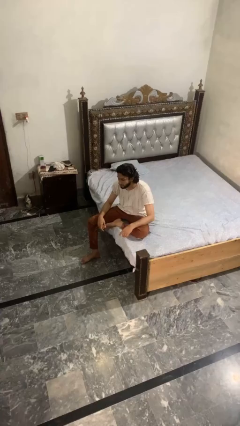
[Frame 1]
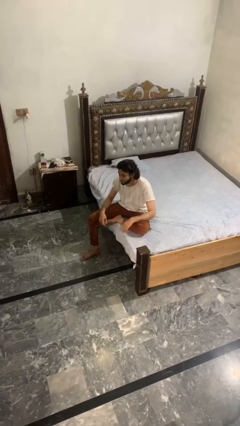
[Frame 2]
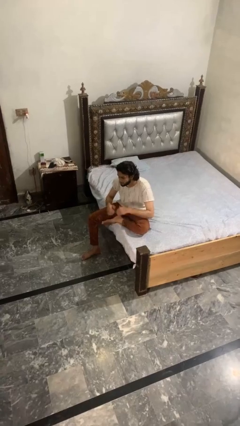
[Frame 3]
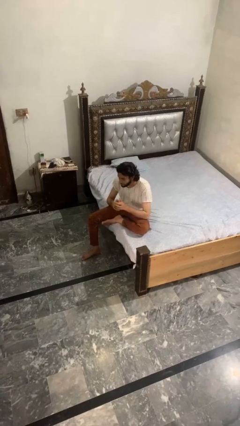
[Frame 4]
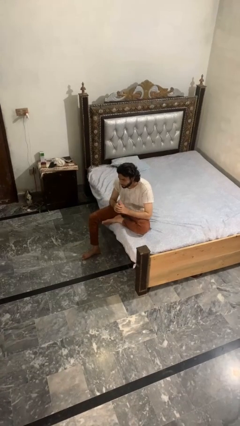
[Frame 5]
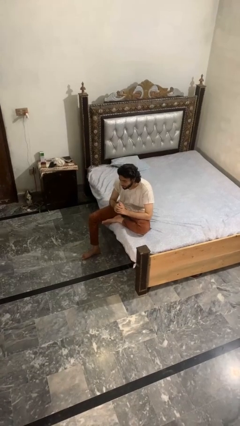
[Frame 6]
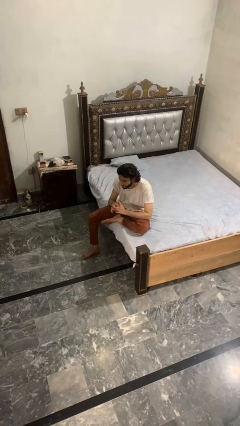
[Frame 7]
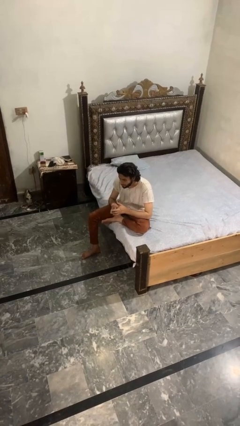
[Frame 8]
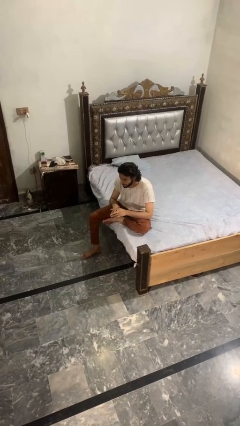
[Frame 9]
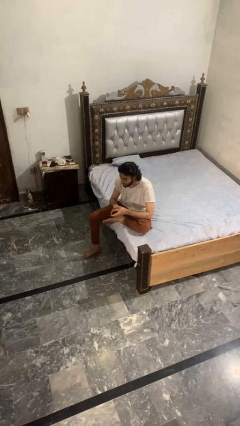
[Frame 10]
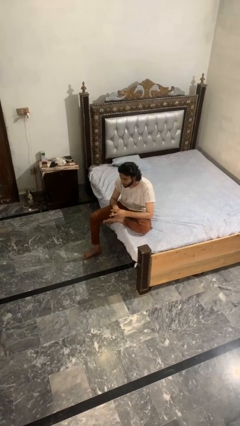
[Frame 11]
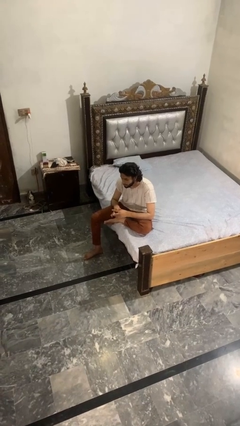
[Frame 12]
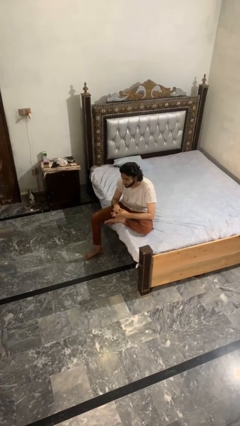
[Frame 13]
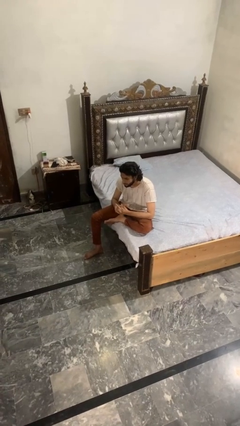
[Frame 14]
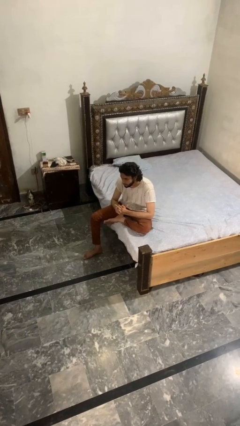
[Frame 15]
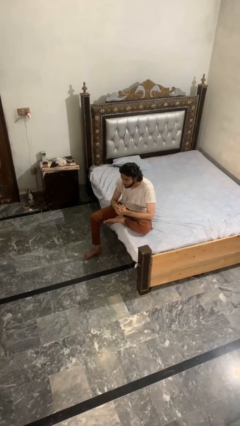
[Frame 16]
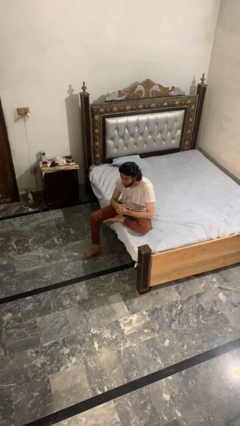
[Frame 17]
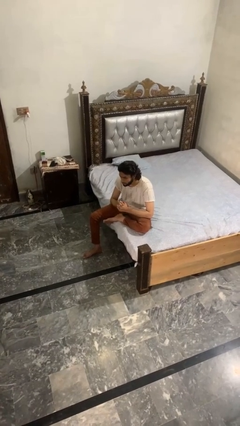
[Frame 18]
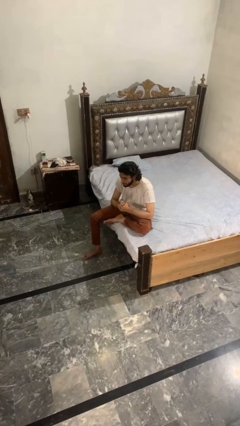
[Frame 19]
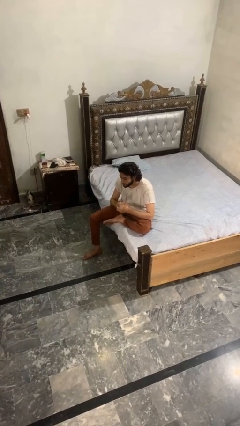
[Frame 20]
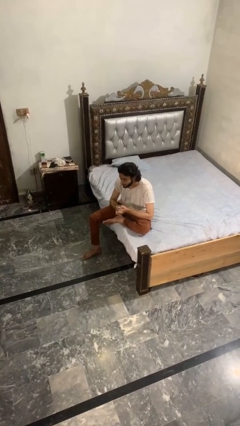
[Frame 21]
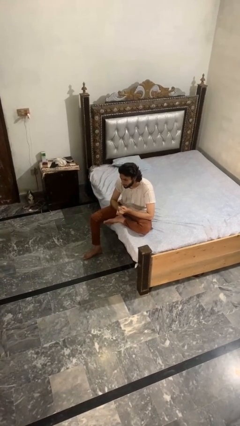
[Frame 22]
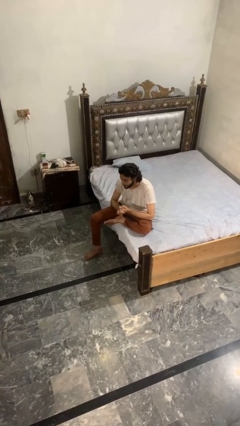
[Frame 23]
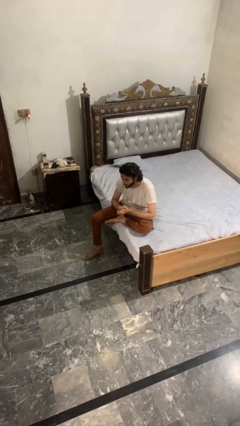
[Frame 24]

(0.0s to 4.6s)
person cracks knuckles

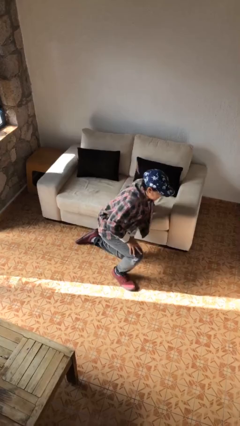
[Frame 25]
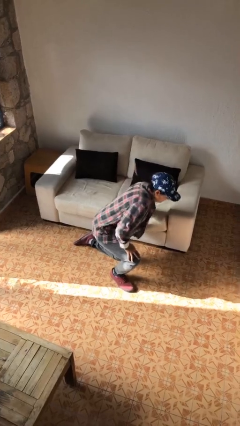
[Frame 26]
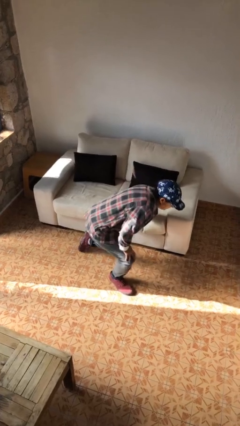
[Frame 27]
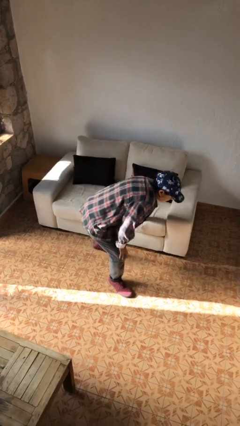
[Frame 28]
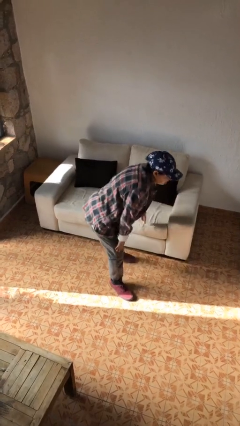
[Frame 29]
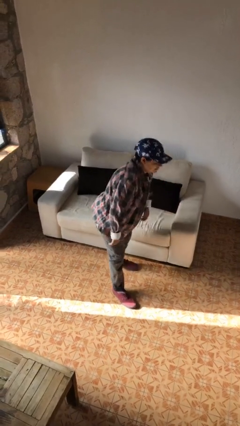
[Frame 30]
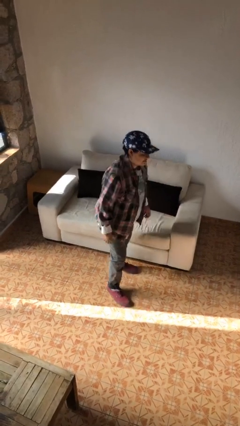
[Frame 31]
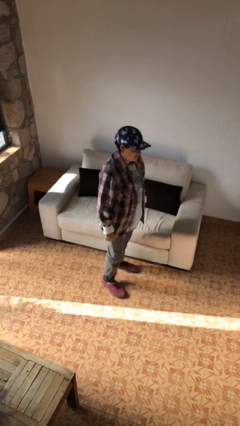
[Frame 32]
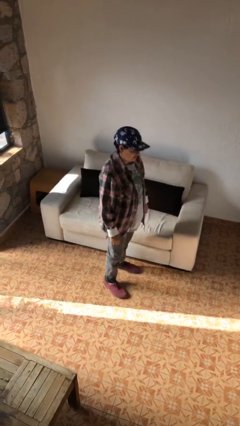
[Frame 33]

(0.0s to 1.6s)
person stands up from floor

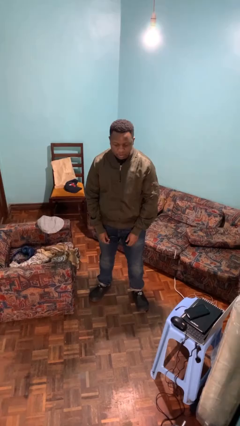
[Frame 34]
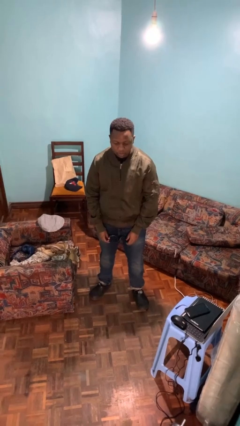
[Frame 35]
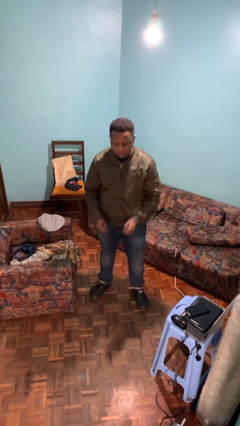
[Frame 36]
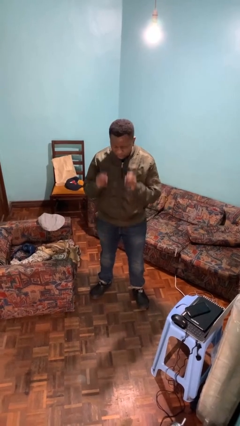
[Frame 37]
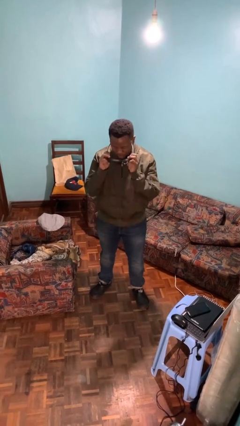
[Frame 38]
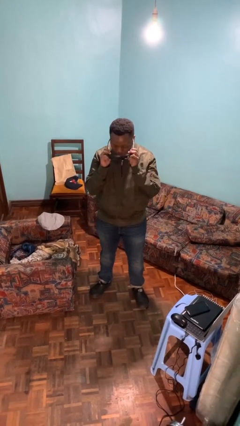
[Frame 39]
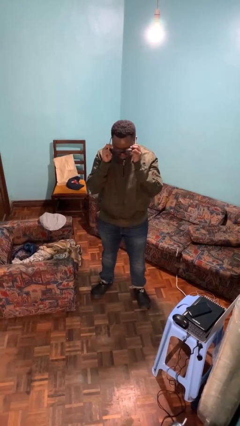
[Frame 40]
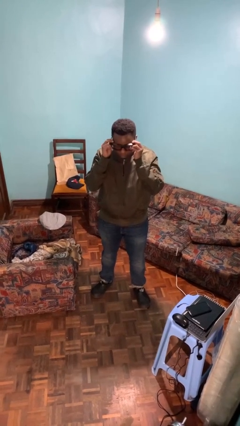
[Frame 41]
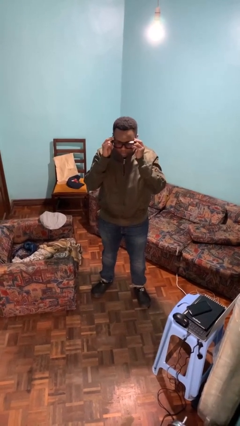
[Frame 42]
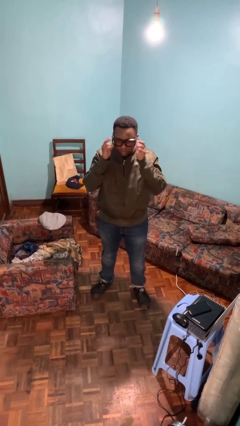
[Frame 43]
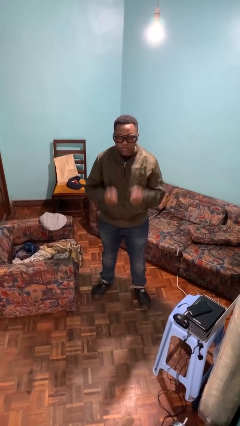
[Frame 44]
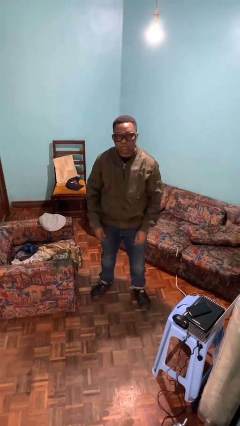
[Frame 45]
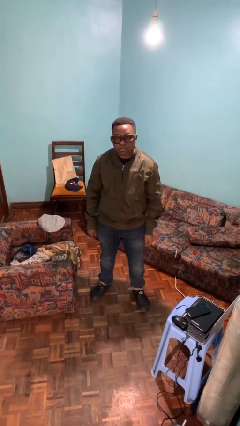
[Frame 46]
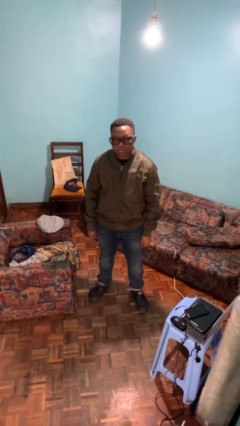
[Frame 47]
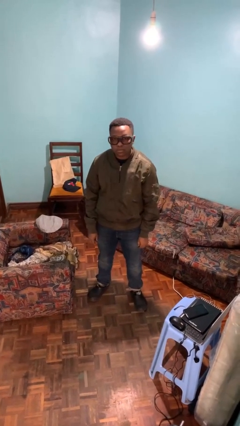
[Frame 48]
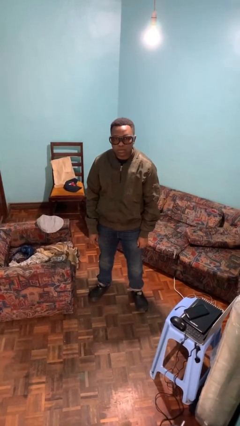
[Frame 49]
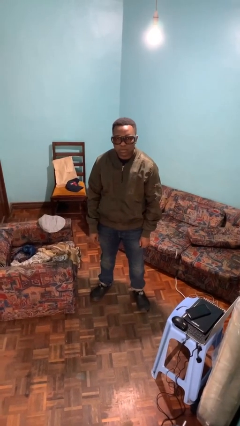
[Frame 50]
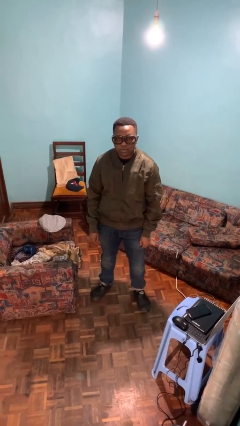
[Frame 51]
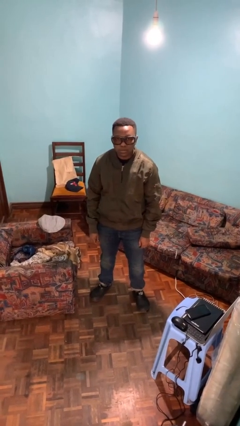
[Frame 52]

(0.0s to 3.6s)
person puts on glasses

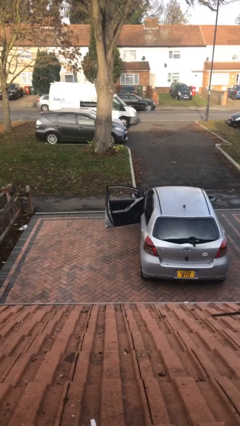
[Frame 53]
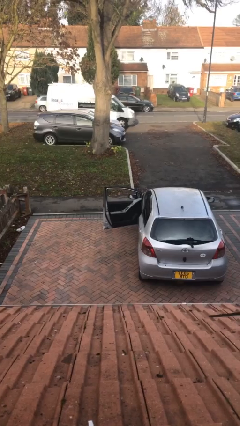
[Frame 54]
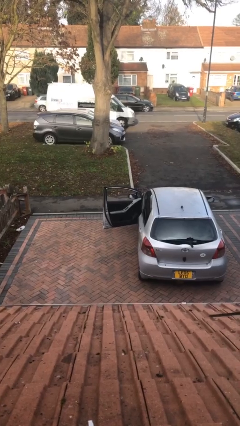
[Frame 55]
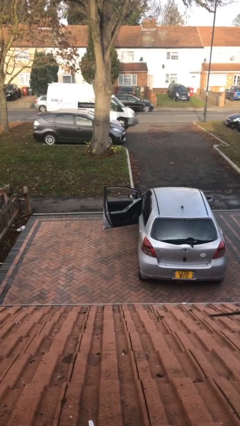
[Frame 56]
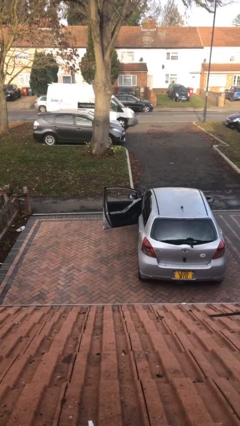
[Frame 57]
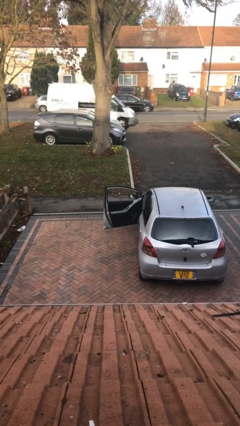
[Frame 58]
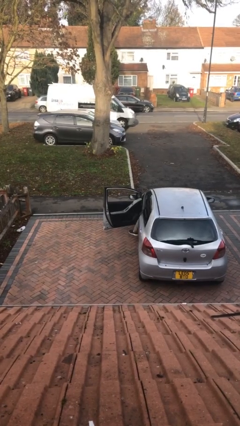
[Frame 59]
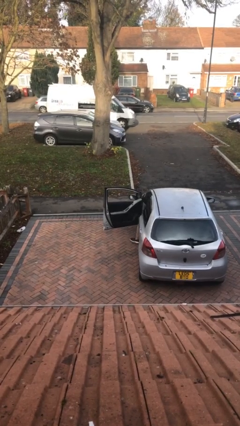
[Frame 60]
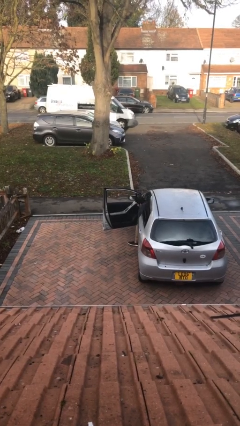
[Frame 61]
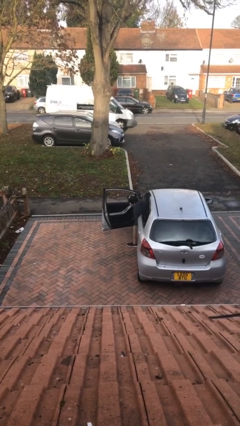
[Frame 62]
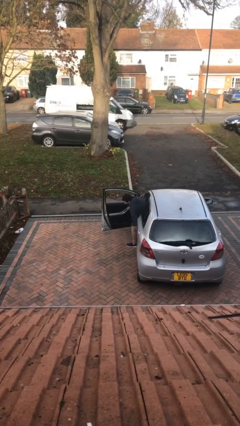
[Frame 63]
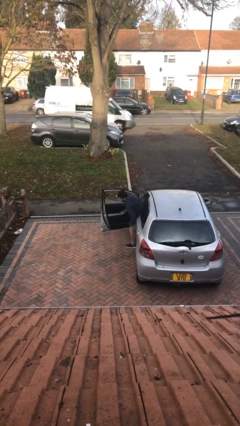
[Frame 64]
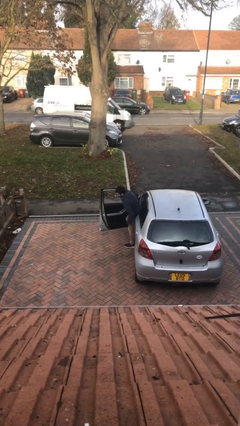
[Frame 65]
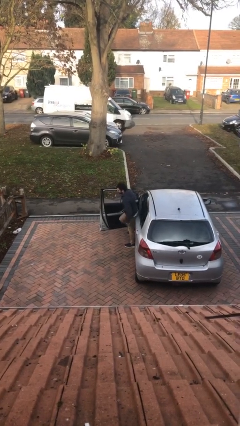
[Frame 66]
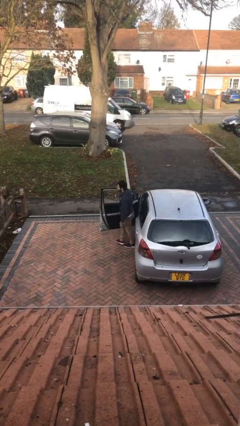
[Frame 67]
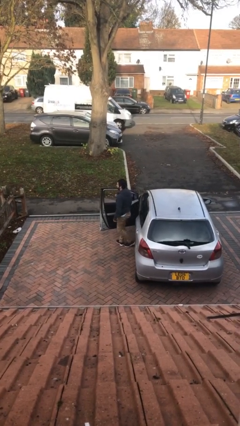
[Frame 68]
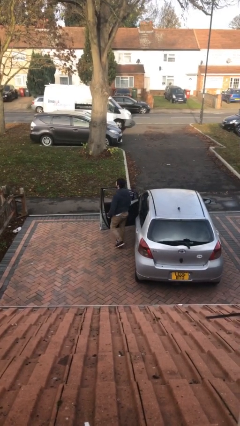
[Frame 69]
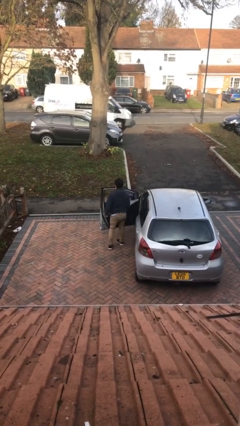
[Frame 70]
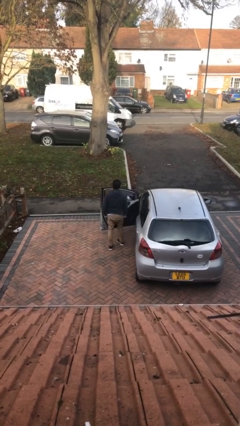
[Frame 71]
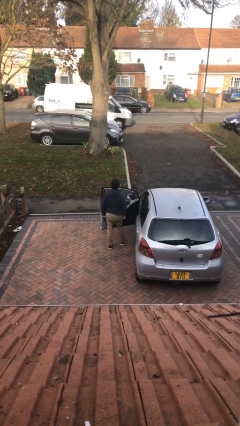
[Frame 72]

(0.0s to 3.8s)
person exits car

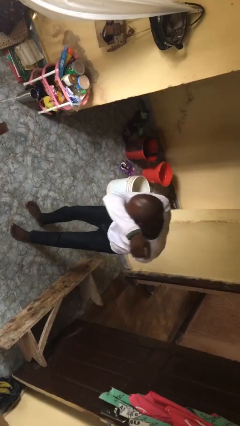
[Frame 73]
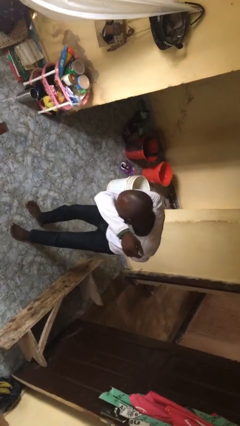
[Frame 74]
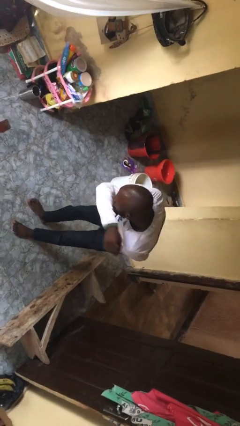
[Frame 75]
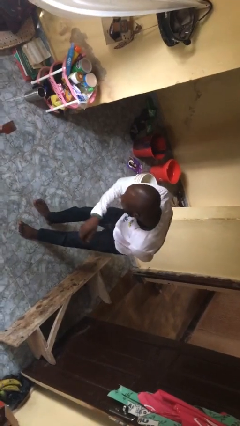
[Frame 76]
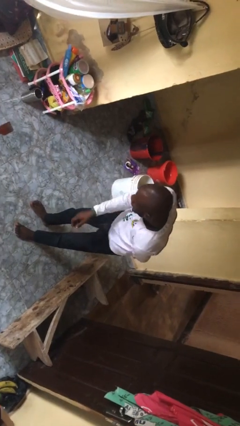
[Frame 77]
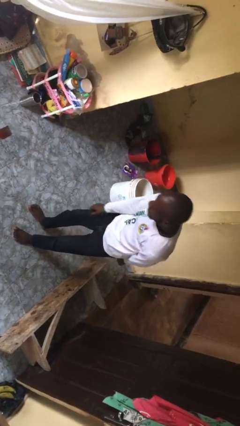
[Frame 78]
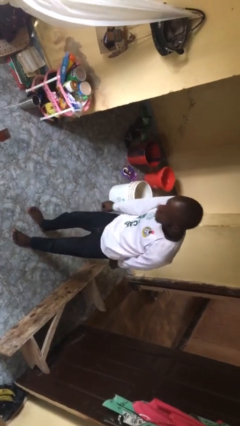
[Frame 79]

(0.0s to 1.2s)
person sneezes into arm

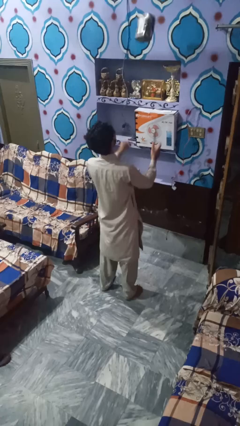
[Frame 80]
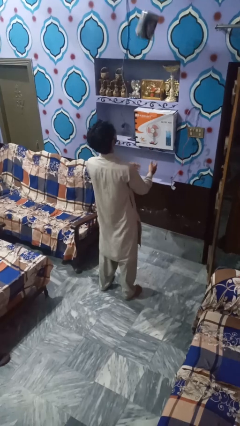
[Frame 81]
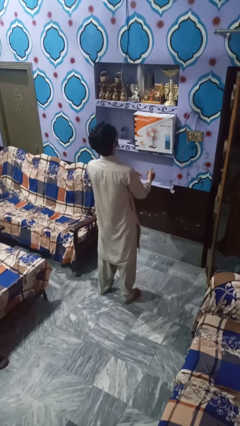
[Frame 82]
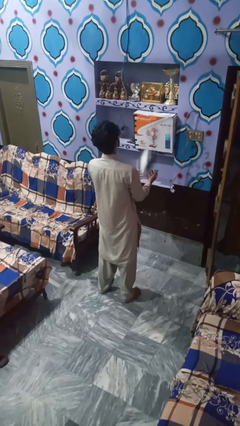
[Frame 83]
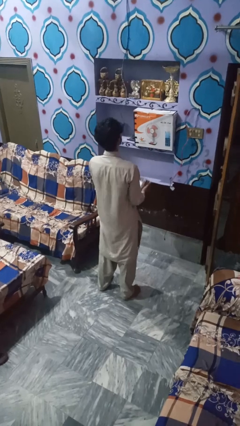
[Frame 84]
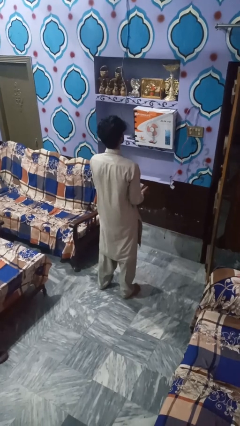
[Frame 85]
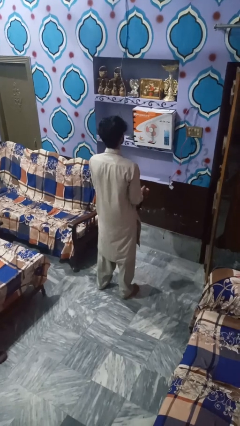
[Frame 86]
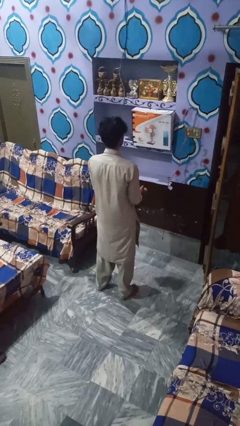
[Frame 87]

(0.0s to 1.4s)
person catches dropped object

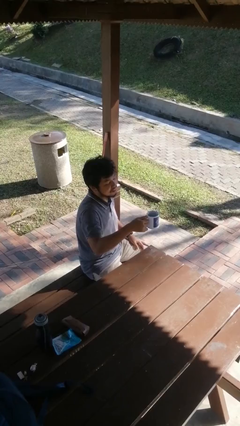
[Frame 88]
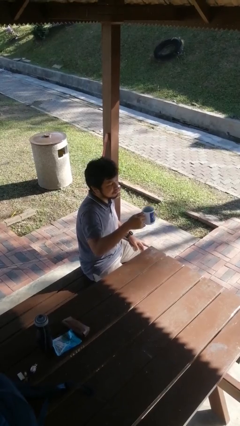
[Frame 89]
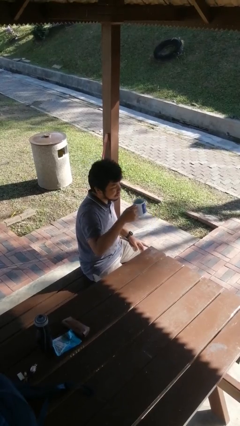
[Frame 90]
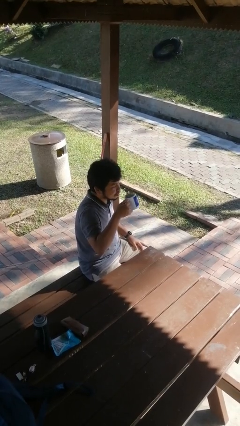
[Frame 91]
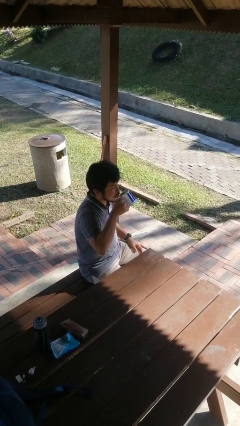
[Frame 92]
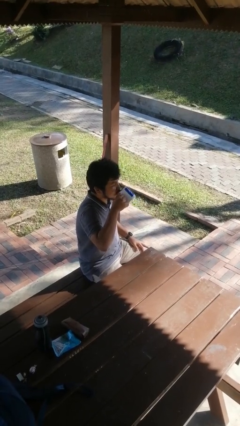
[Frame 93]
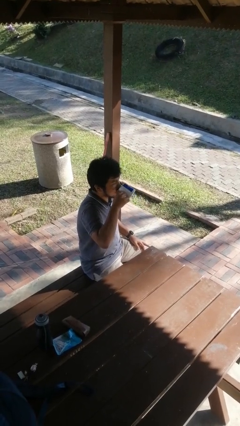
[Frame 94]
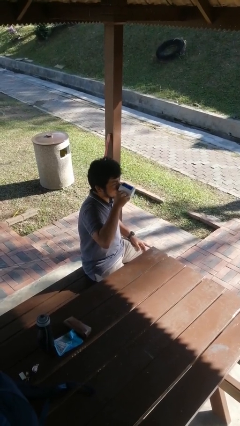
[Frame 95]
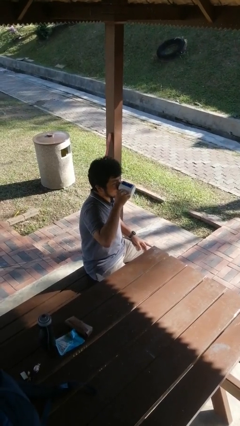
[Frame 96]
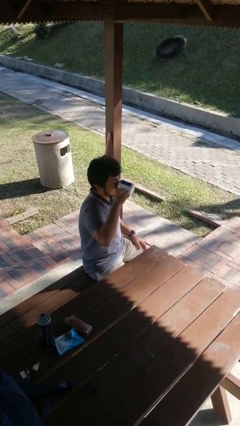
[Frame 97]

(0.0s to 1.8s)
person drinks from mug
